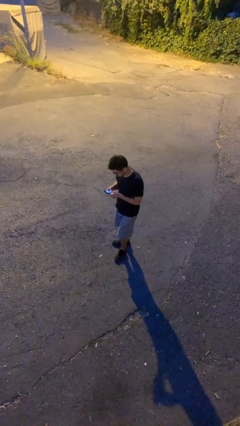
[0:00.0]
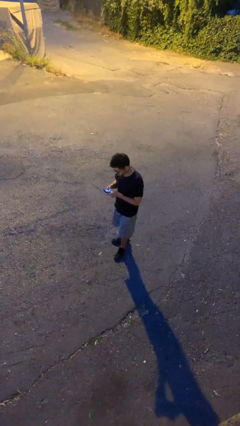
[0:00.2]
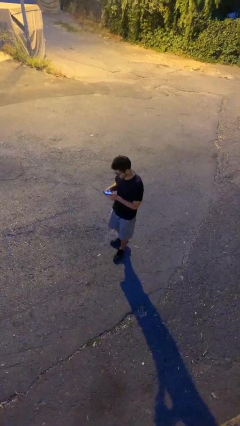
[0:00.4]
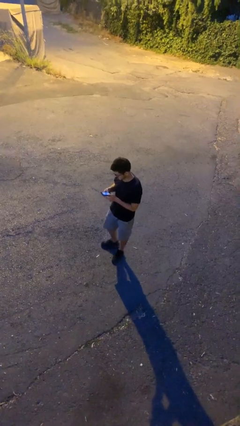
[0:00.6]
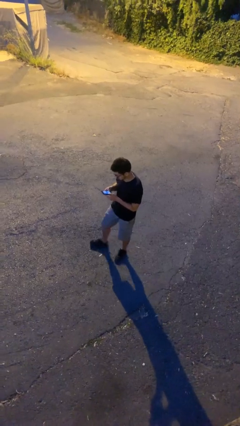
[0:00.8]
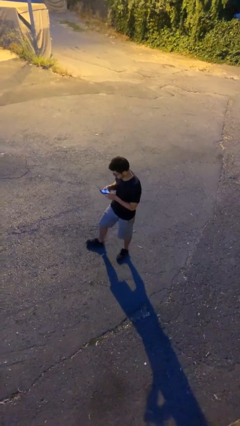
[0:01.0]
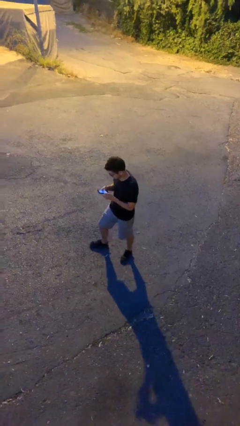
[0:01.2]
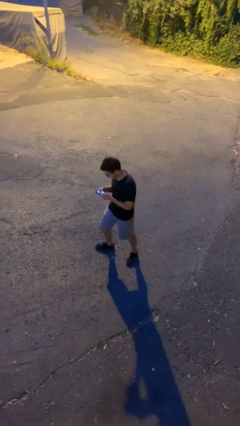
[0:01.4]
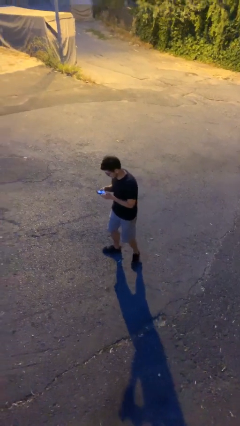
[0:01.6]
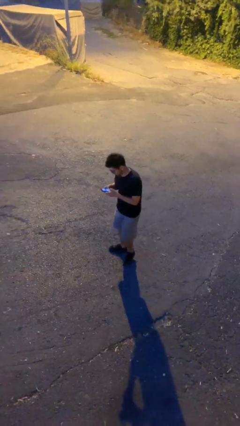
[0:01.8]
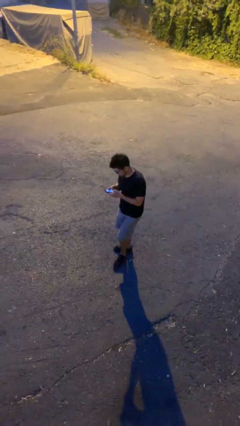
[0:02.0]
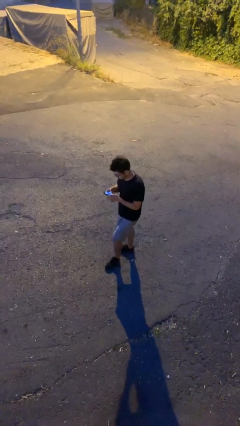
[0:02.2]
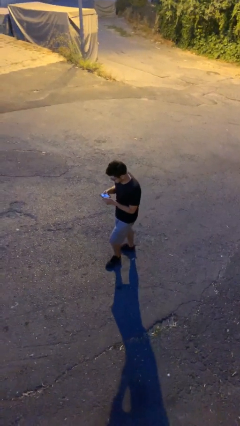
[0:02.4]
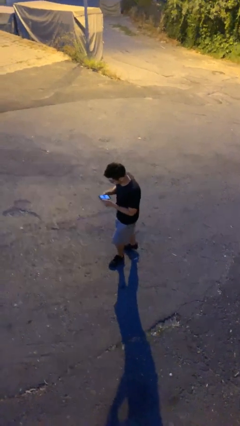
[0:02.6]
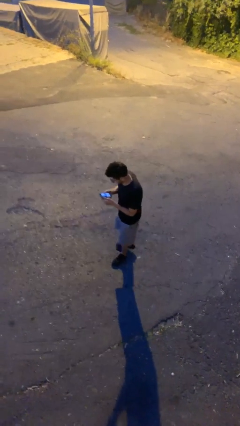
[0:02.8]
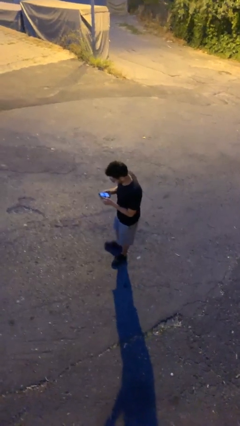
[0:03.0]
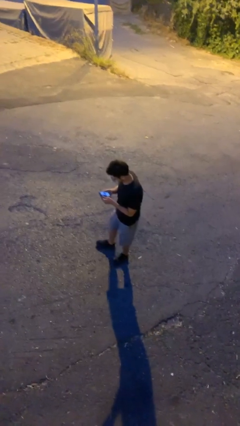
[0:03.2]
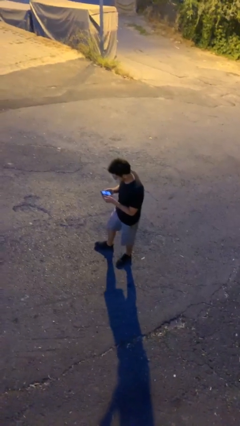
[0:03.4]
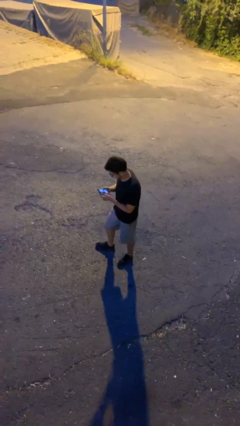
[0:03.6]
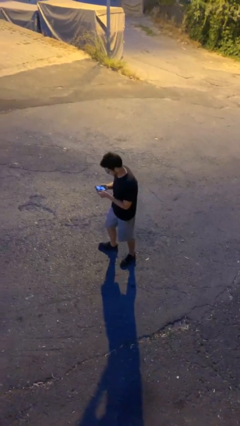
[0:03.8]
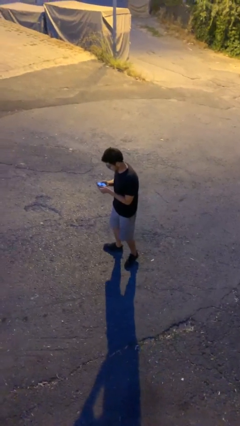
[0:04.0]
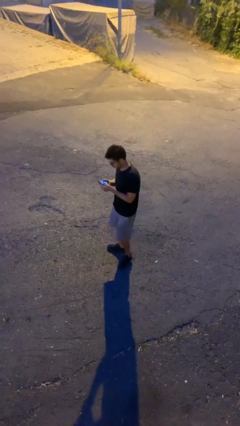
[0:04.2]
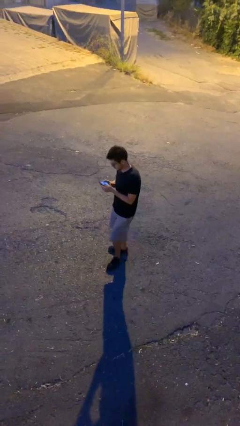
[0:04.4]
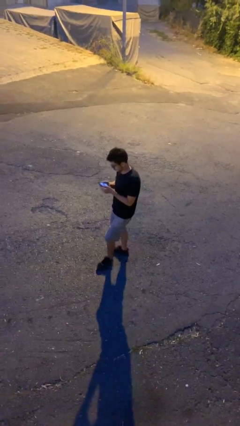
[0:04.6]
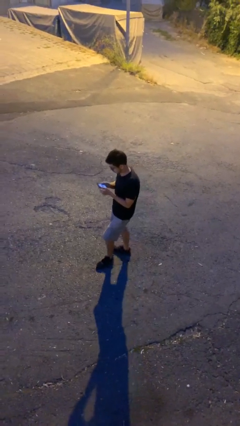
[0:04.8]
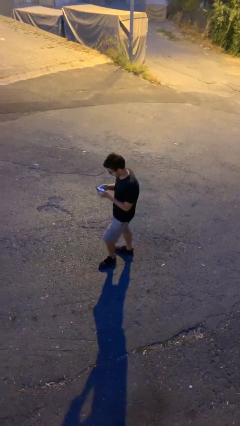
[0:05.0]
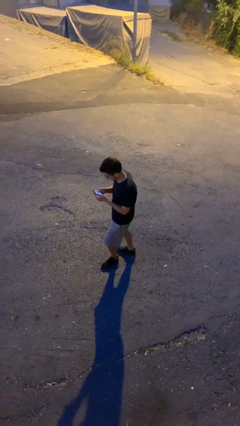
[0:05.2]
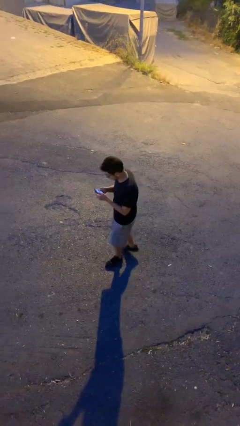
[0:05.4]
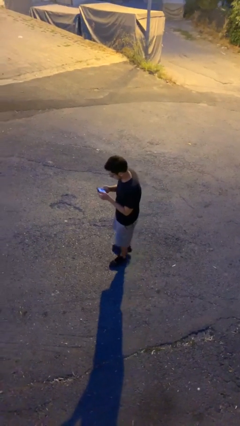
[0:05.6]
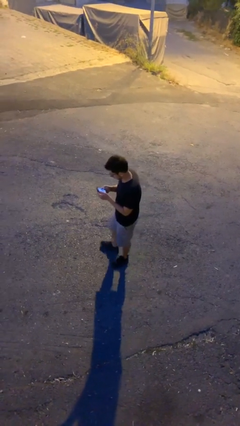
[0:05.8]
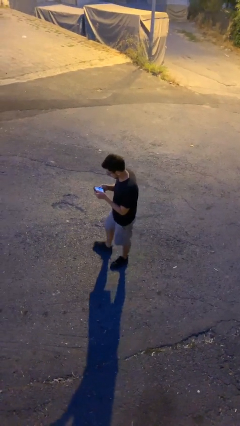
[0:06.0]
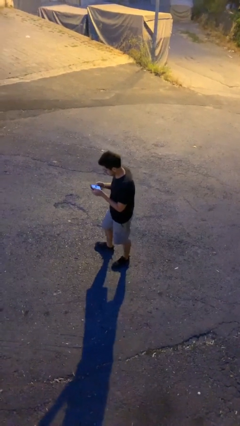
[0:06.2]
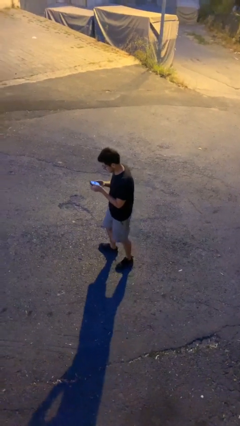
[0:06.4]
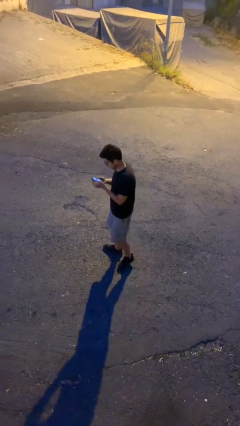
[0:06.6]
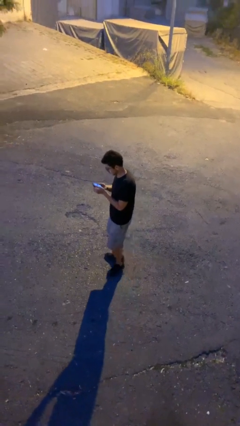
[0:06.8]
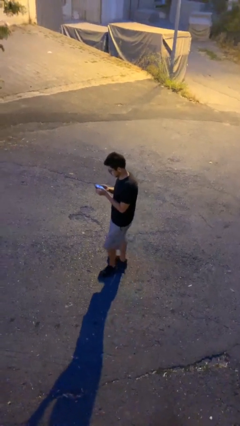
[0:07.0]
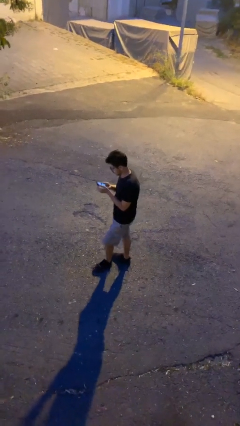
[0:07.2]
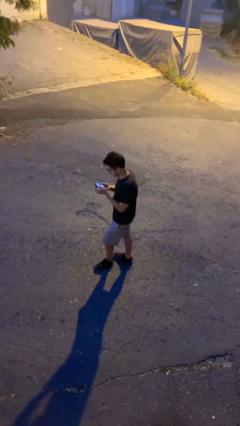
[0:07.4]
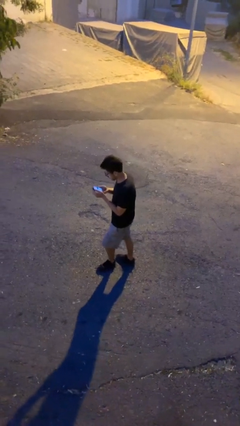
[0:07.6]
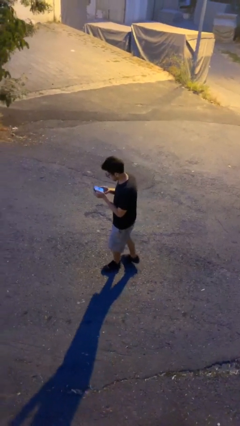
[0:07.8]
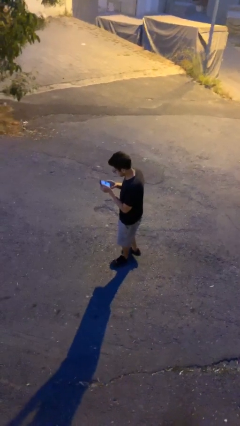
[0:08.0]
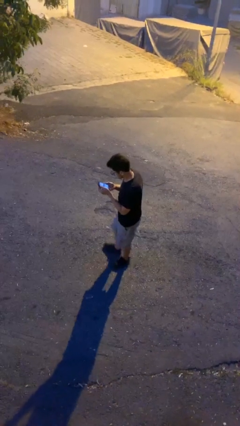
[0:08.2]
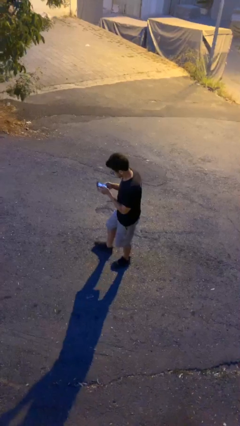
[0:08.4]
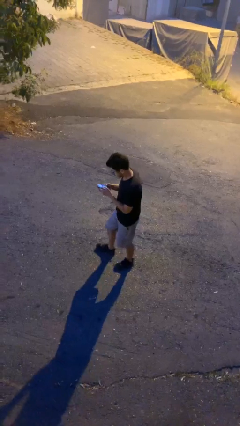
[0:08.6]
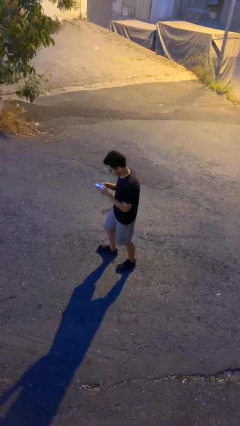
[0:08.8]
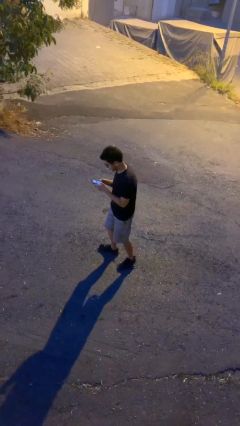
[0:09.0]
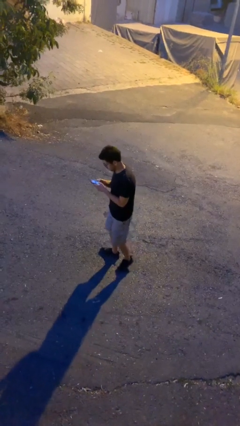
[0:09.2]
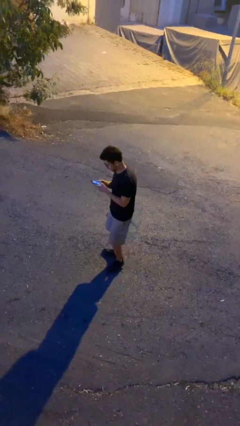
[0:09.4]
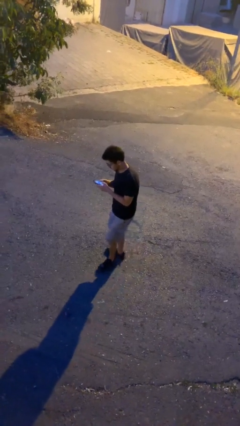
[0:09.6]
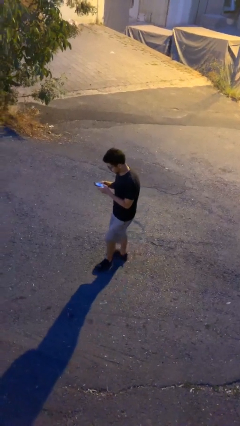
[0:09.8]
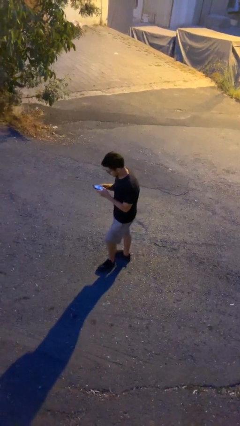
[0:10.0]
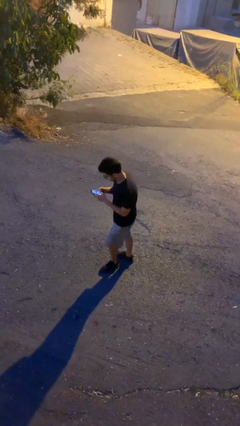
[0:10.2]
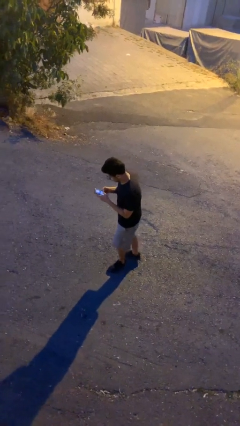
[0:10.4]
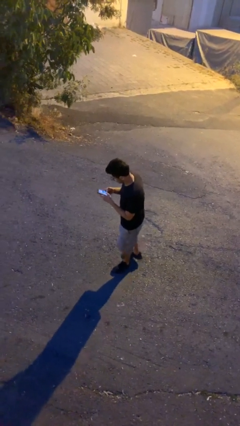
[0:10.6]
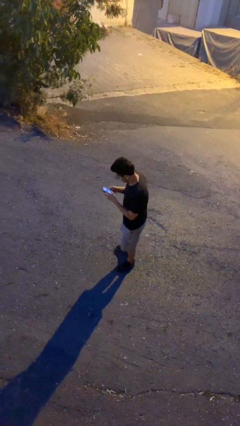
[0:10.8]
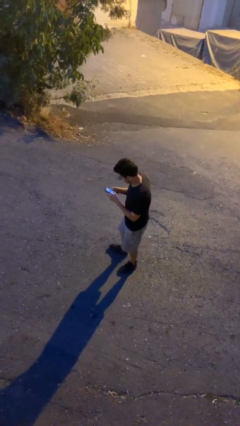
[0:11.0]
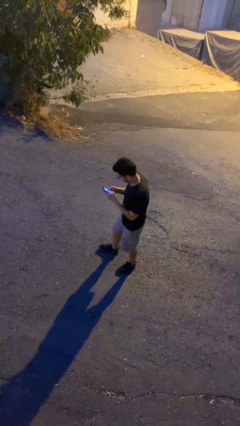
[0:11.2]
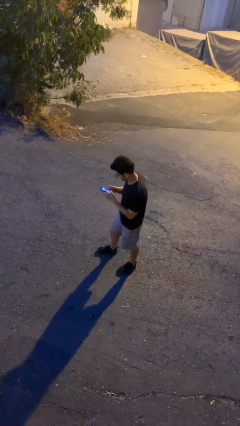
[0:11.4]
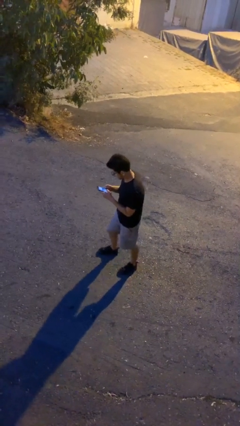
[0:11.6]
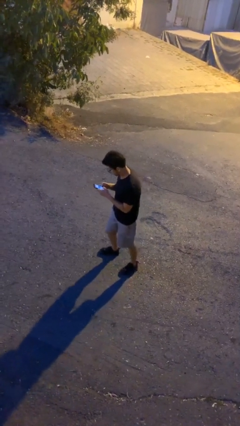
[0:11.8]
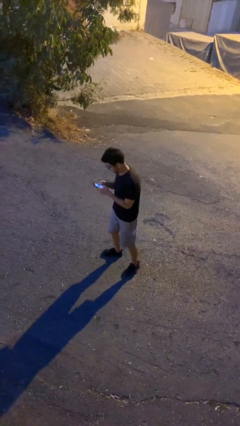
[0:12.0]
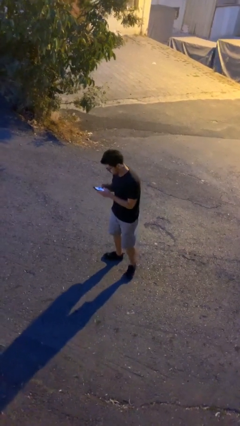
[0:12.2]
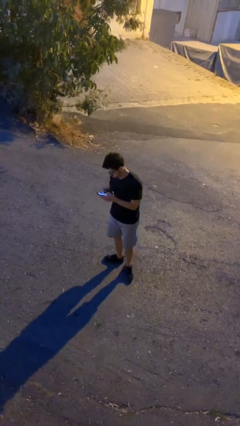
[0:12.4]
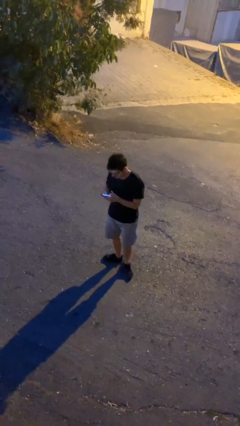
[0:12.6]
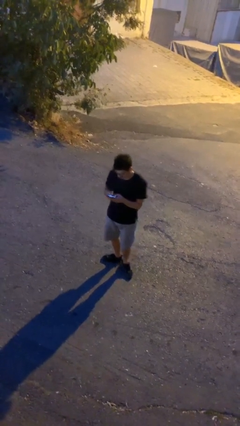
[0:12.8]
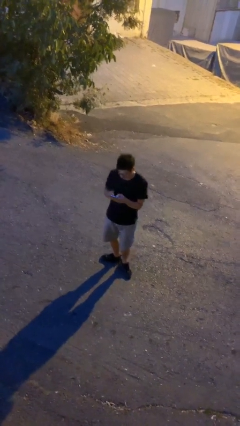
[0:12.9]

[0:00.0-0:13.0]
person texts on phone

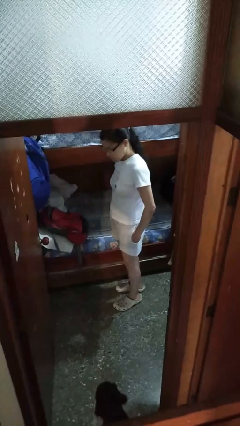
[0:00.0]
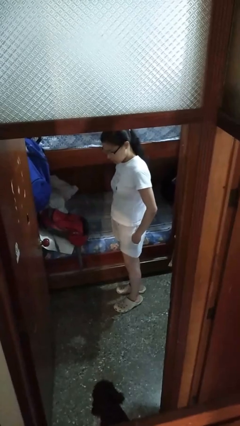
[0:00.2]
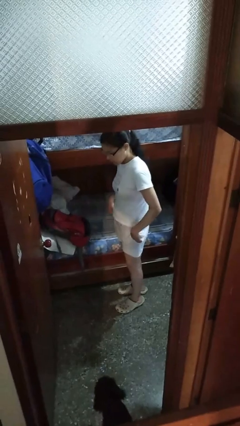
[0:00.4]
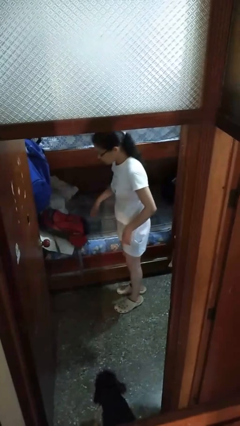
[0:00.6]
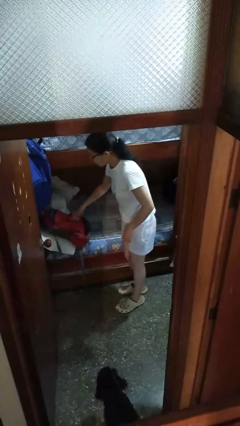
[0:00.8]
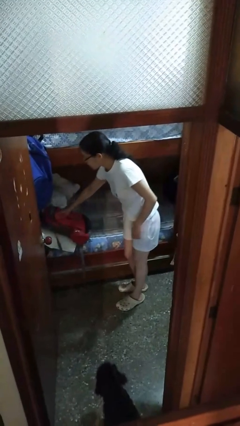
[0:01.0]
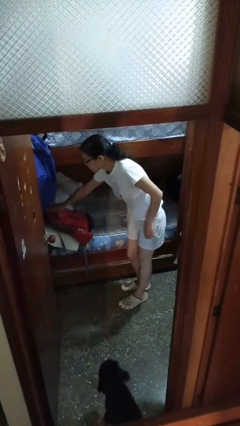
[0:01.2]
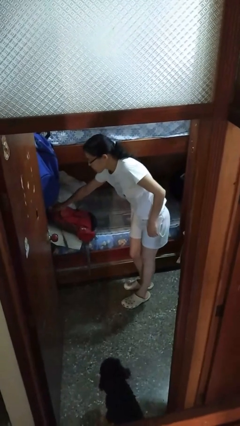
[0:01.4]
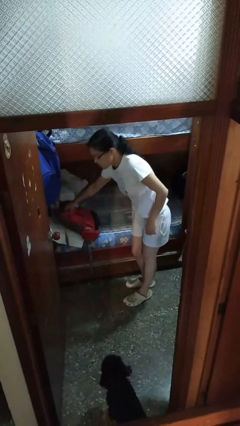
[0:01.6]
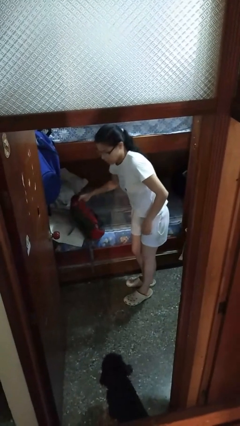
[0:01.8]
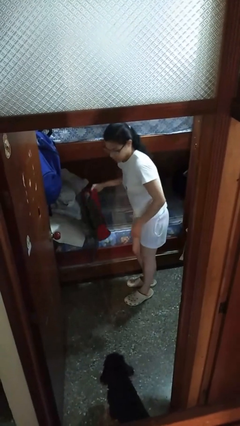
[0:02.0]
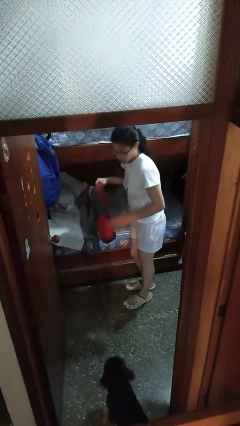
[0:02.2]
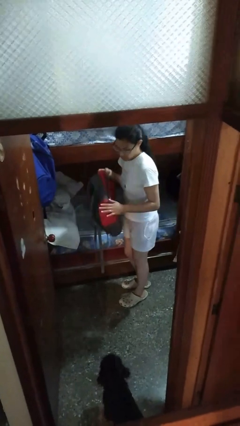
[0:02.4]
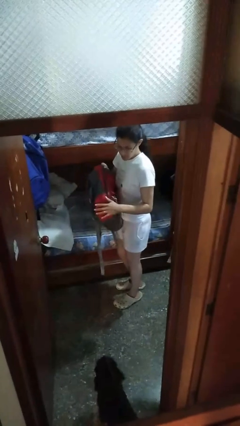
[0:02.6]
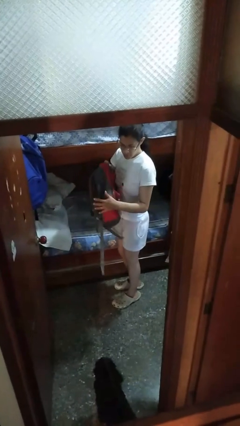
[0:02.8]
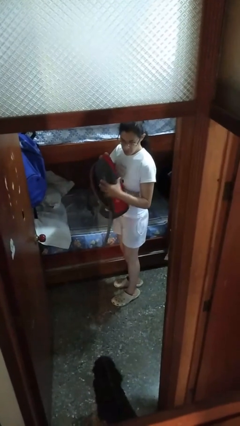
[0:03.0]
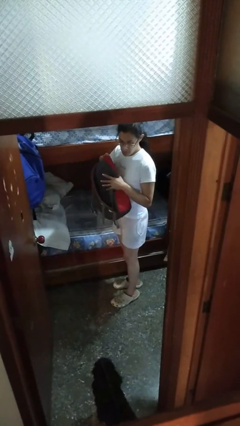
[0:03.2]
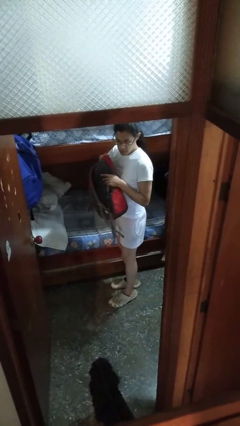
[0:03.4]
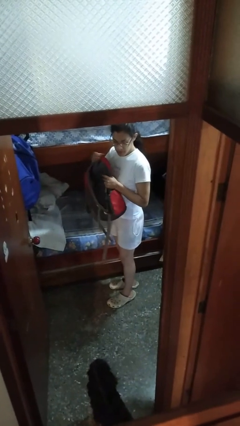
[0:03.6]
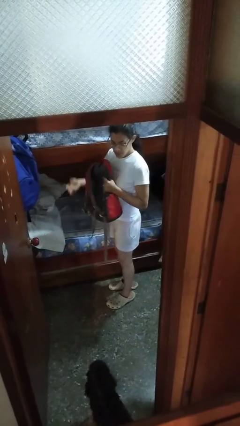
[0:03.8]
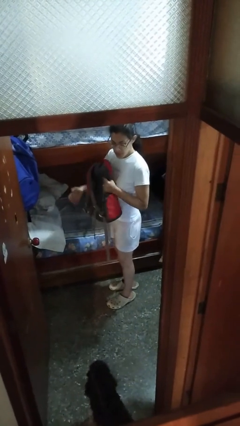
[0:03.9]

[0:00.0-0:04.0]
person picks up object from bed

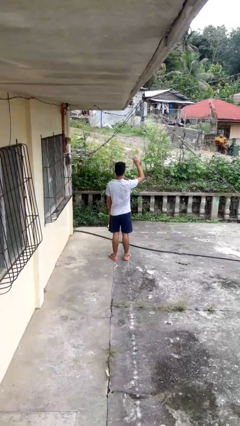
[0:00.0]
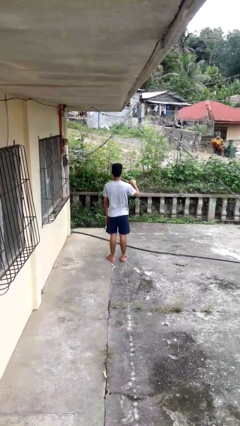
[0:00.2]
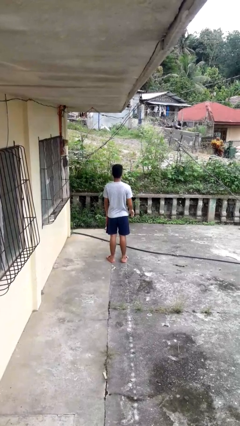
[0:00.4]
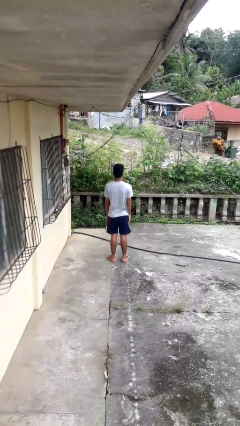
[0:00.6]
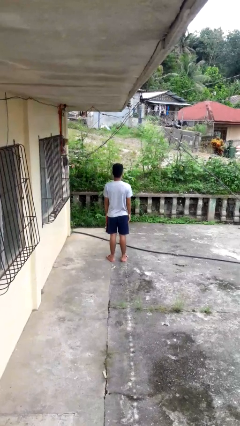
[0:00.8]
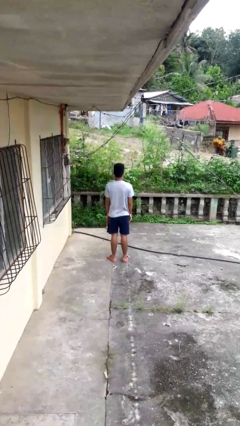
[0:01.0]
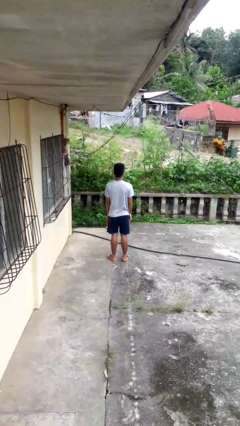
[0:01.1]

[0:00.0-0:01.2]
person gestures lower hand
